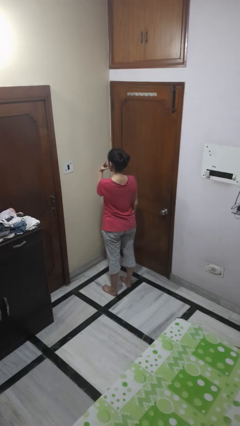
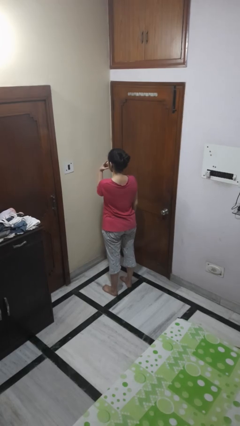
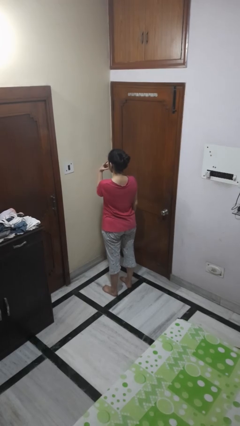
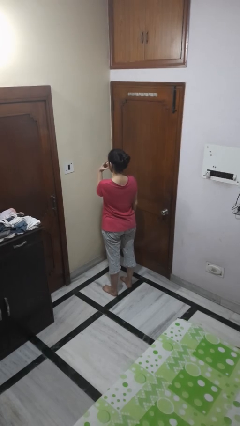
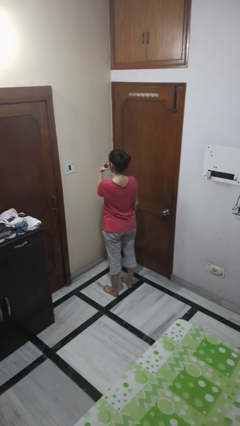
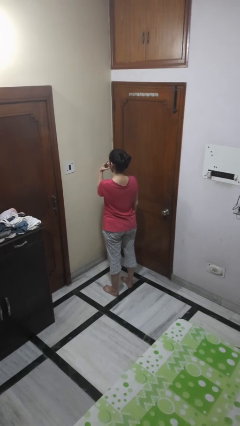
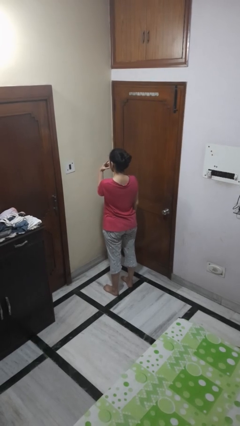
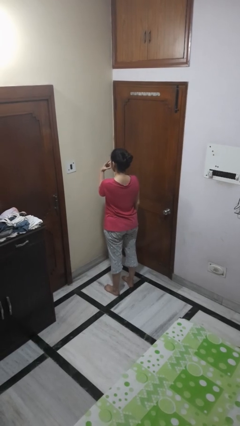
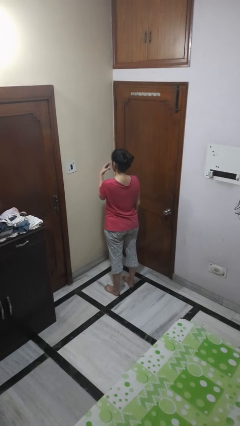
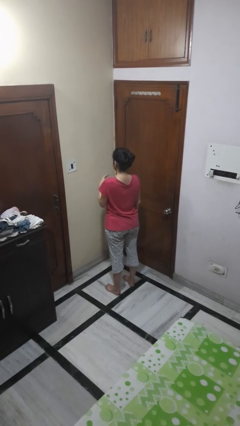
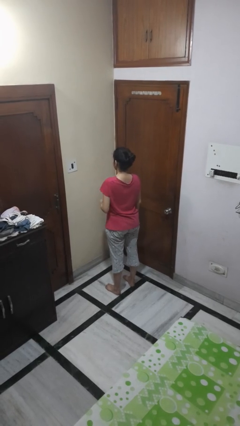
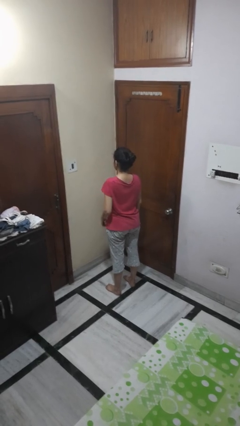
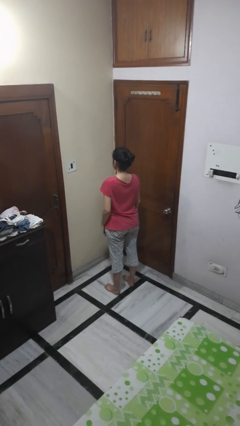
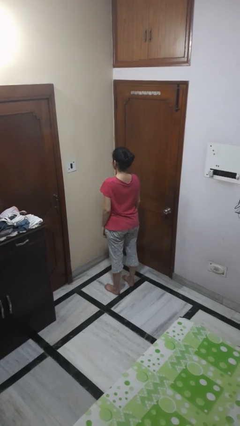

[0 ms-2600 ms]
person gestures watch closely

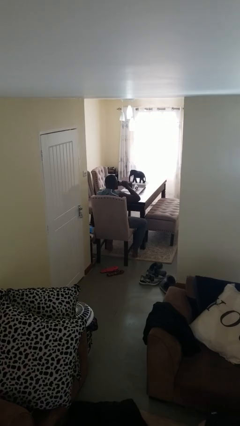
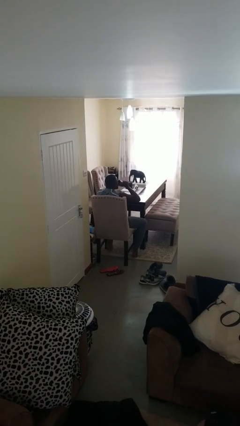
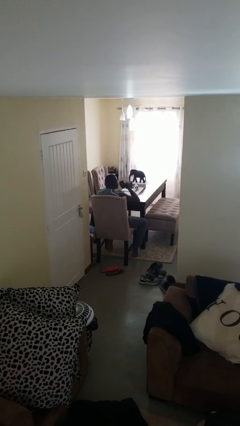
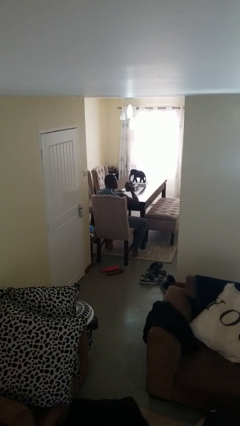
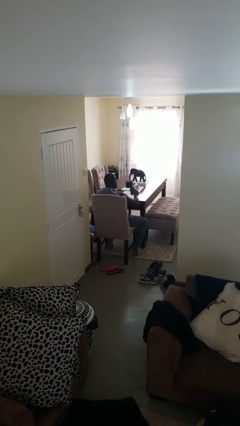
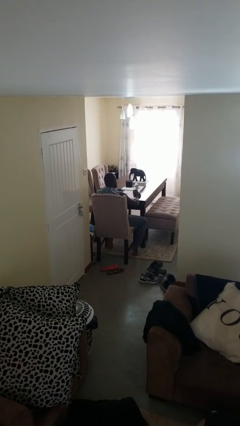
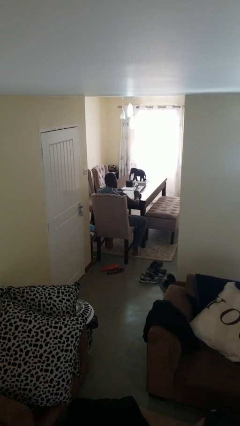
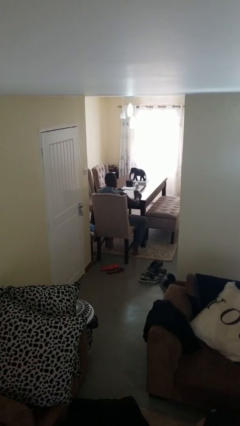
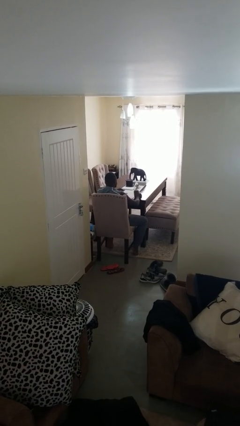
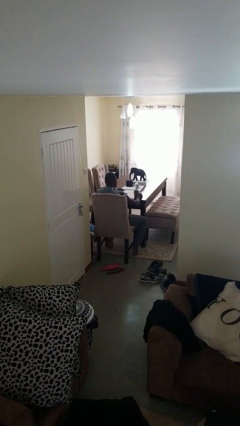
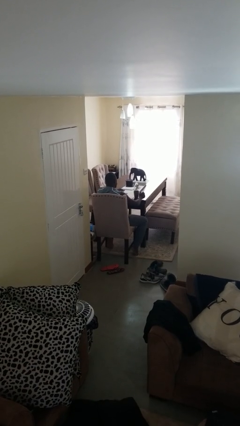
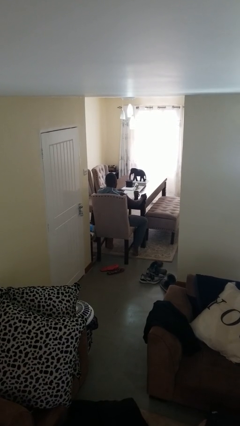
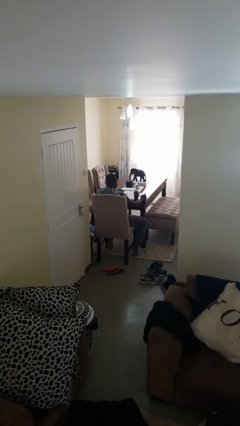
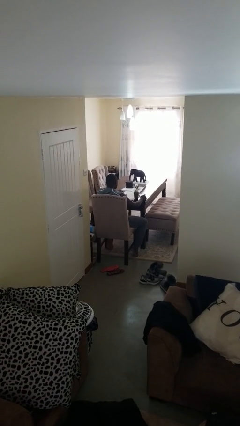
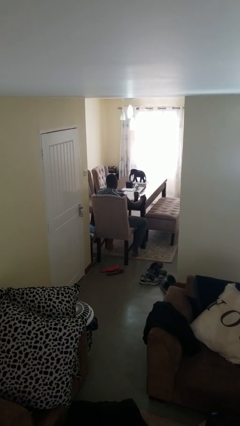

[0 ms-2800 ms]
person puts down object on table

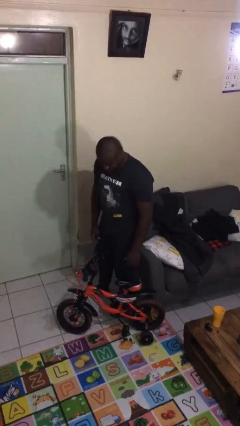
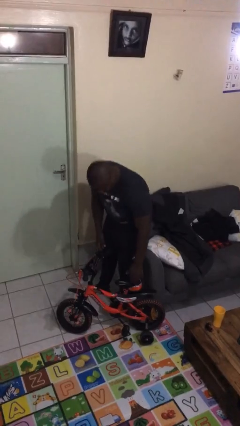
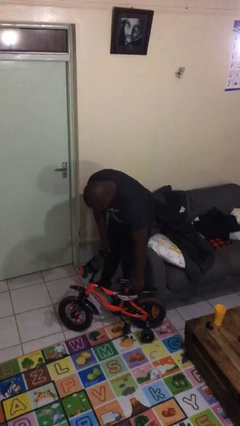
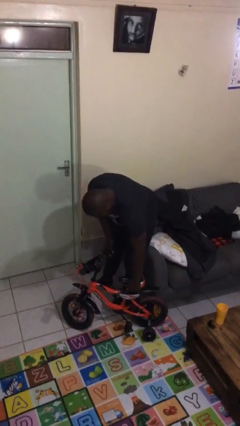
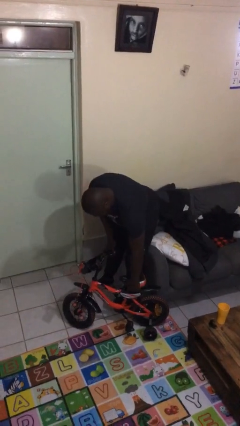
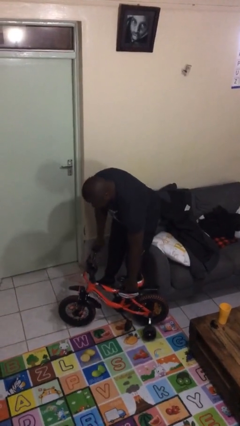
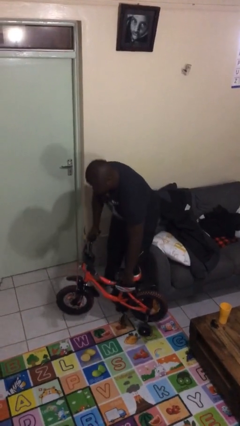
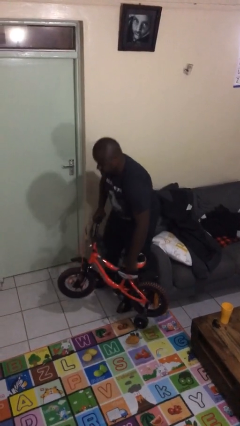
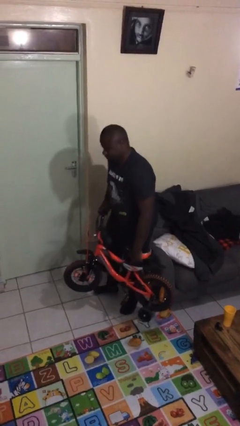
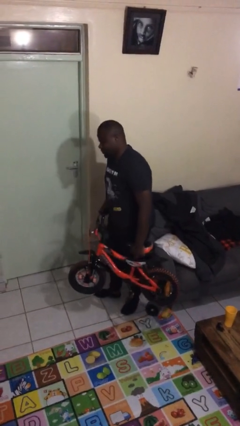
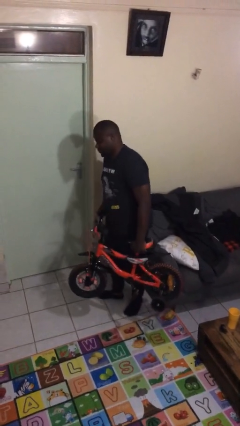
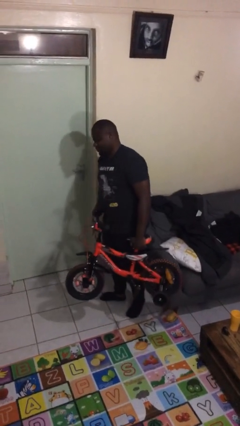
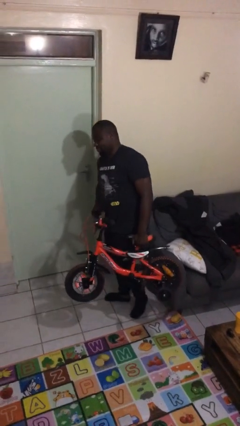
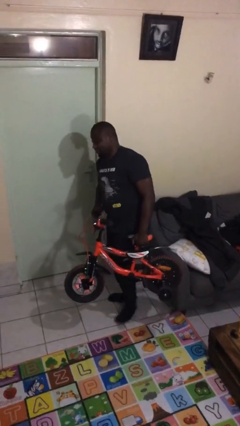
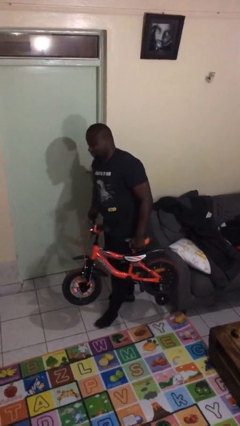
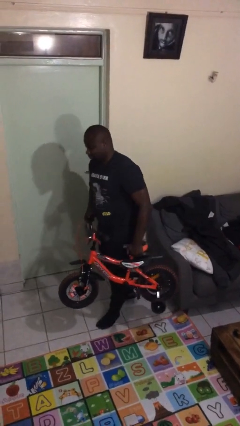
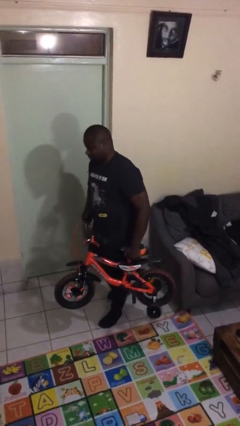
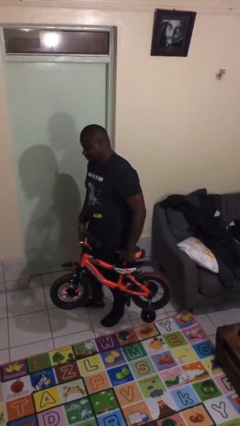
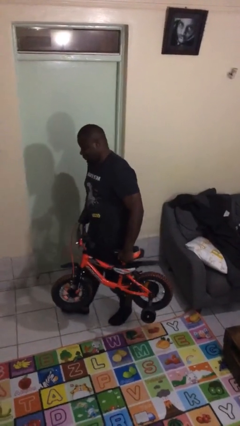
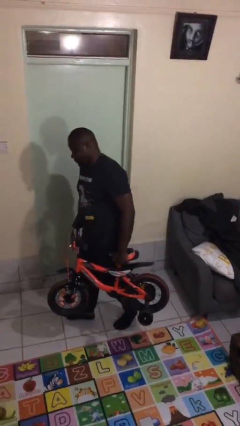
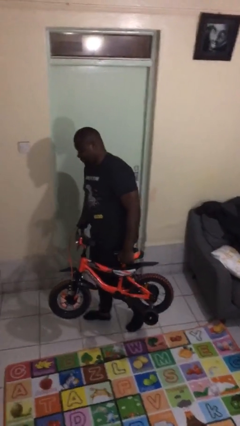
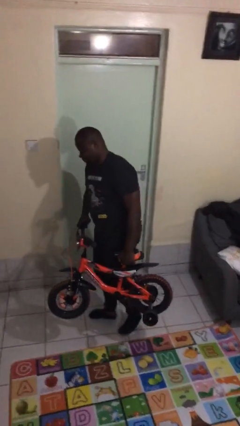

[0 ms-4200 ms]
person carries bicycle

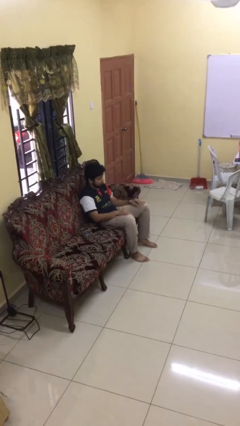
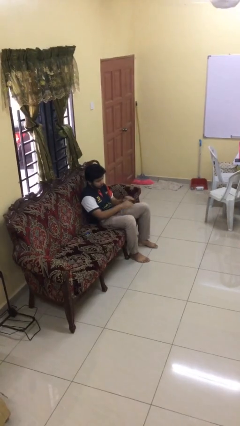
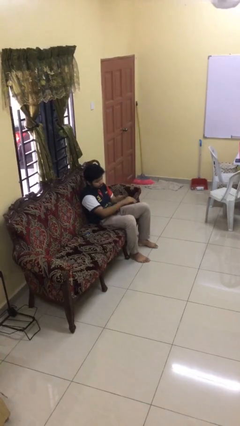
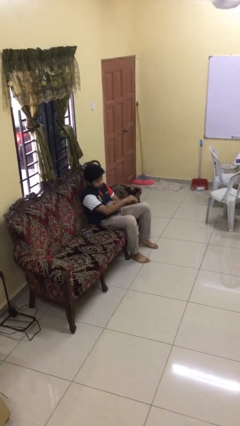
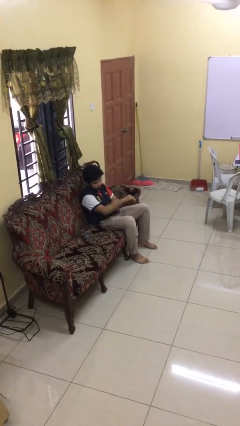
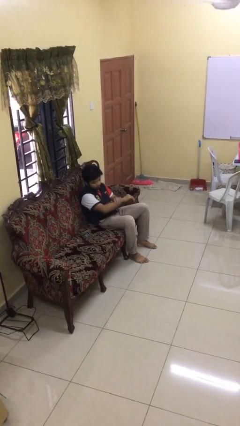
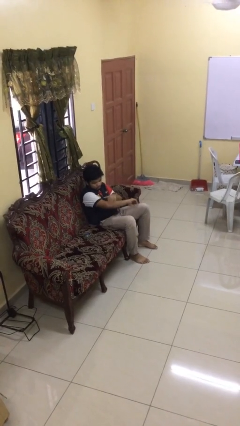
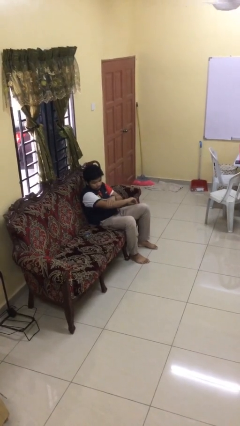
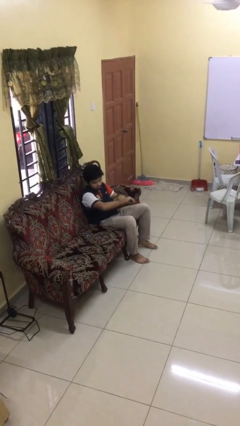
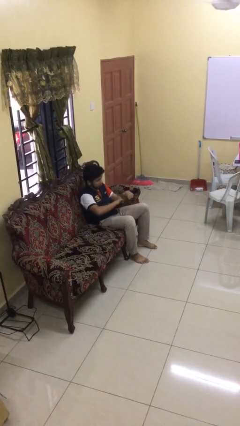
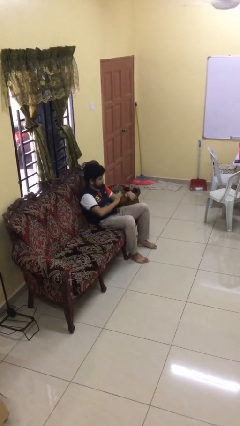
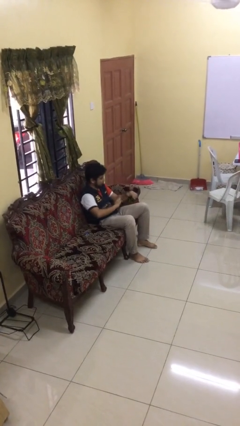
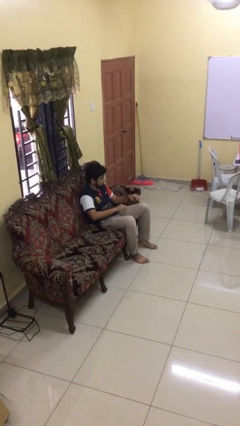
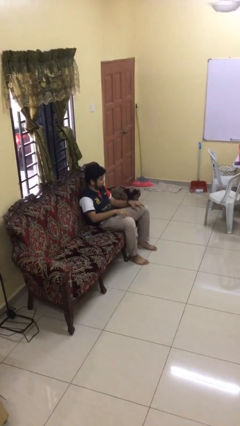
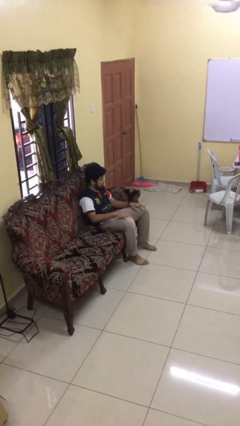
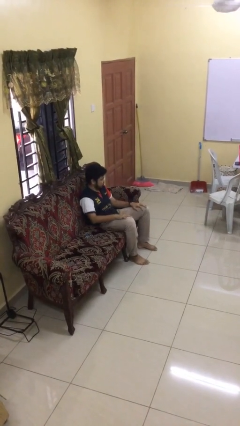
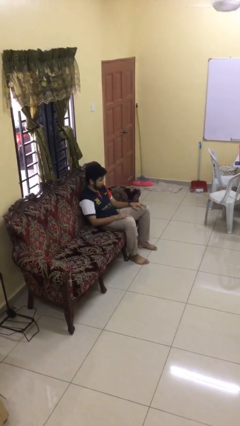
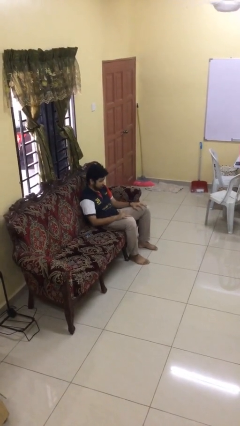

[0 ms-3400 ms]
person looks at hands in lap

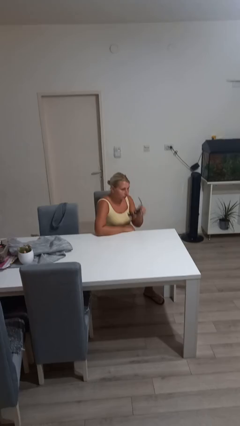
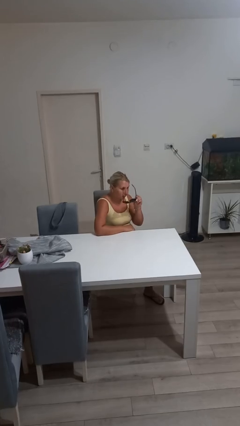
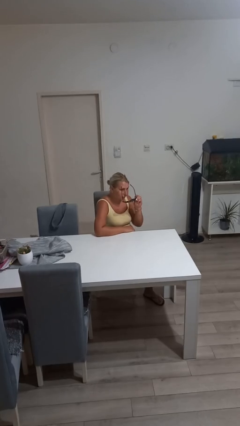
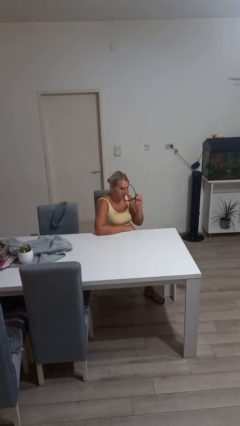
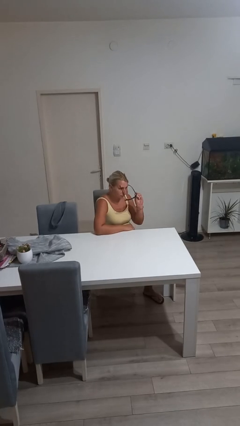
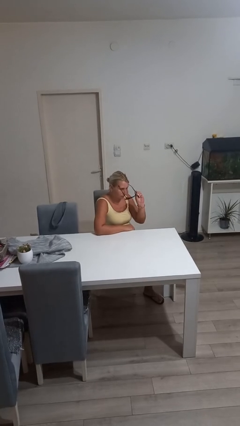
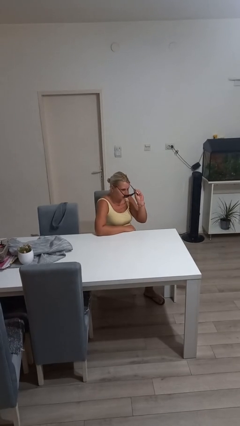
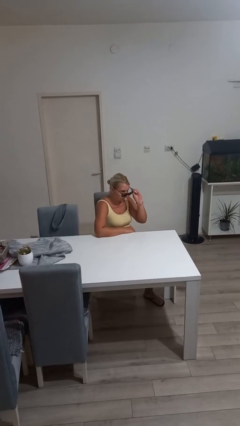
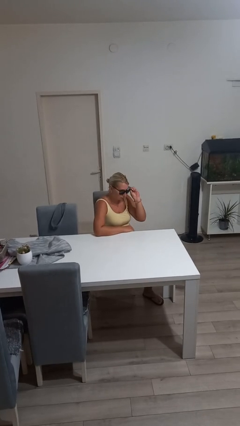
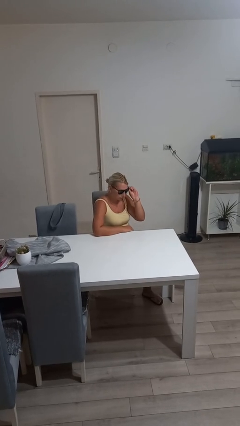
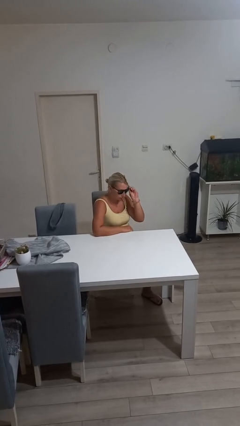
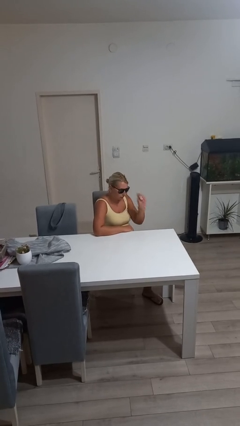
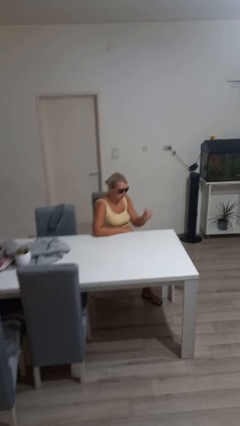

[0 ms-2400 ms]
person puts on sunglasses

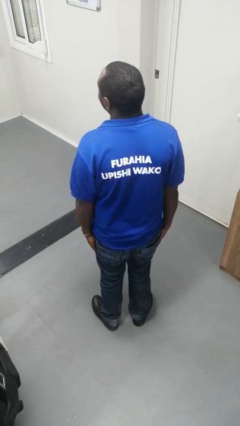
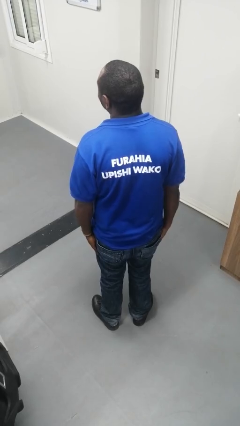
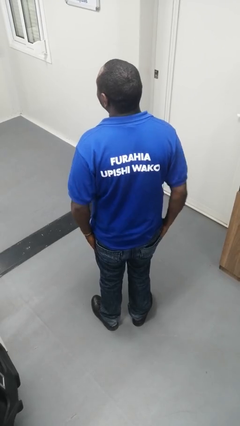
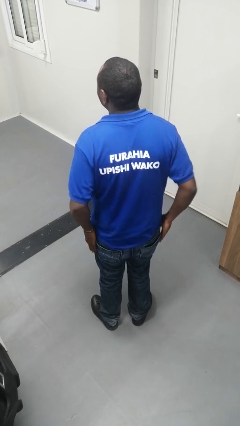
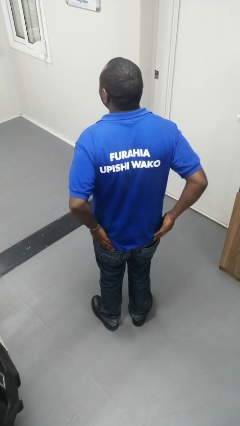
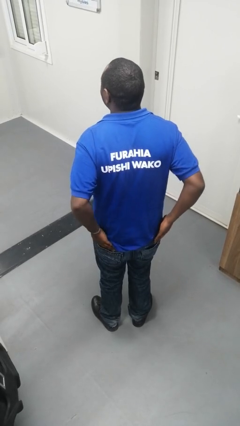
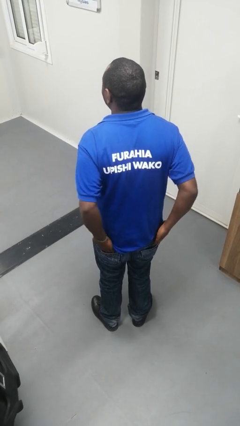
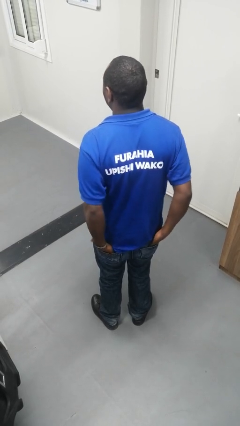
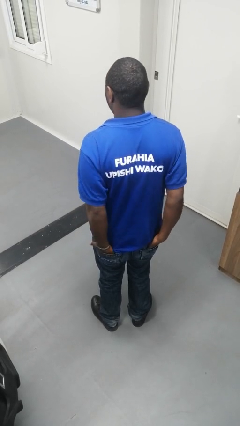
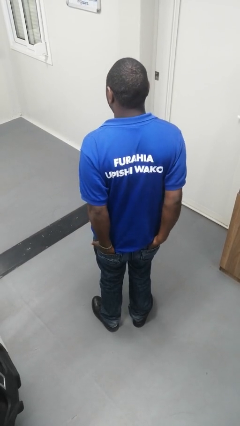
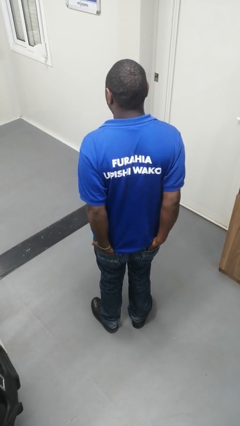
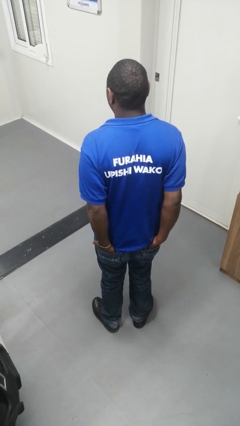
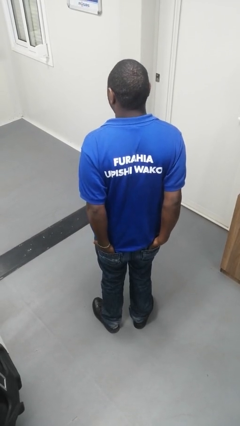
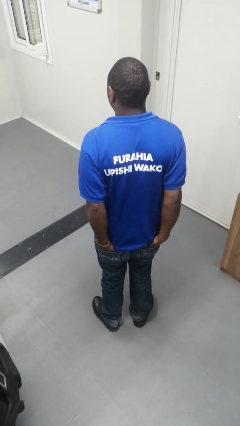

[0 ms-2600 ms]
person puts hands in back pockets
